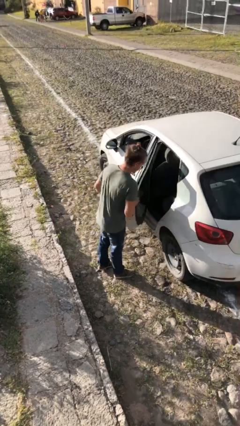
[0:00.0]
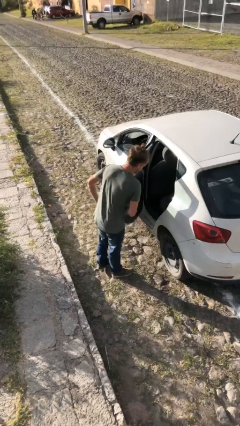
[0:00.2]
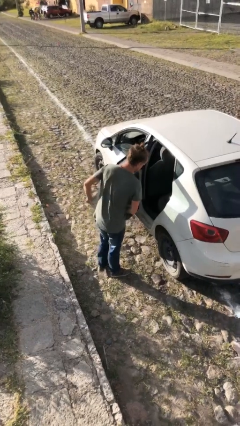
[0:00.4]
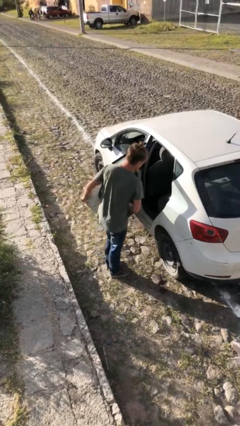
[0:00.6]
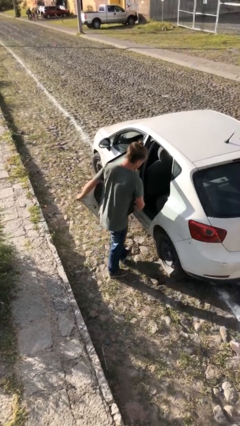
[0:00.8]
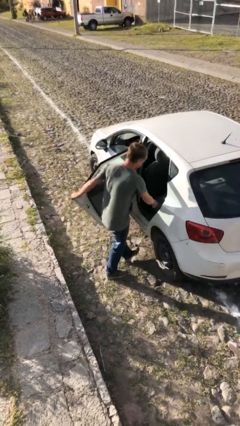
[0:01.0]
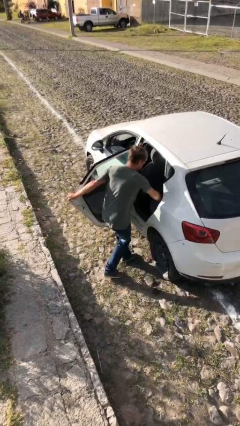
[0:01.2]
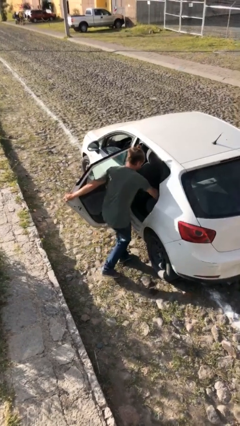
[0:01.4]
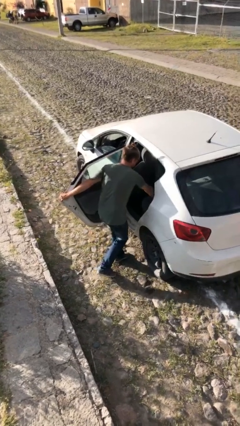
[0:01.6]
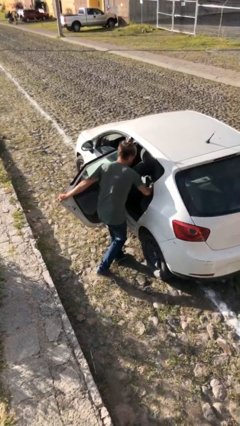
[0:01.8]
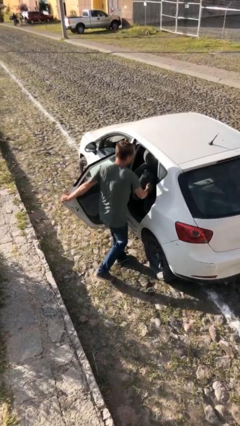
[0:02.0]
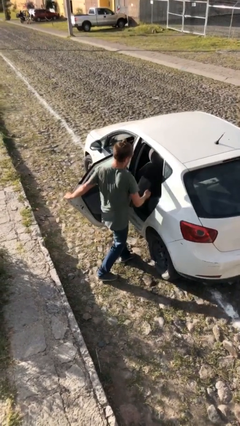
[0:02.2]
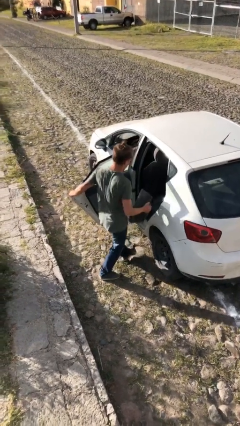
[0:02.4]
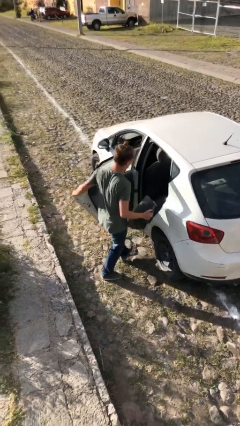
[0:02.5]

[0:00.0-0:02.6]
person unloads car

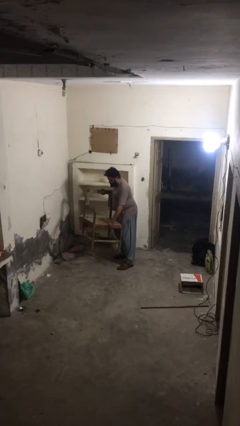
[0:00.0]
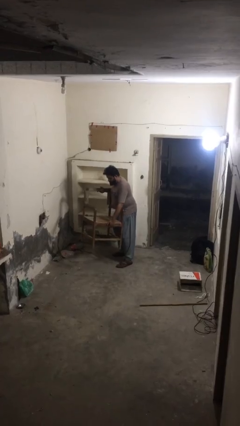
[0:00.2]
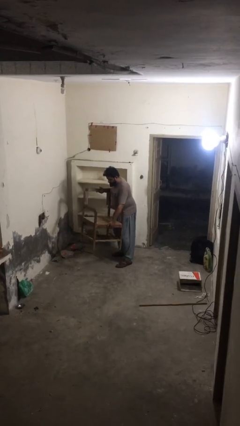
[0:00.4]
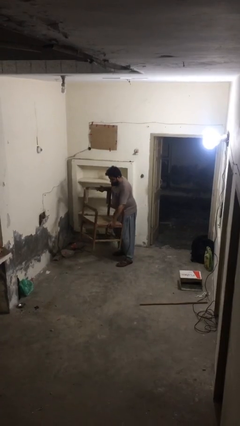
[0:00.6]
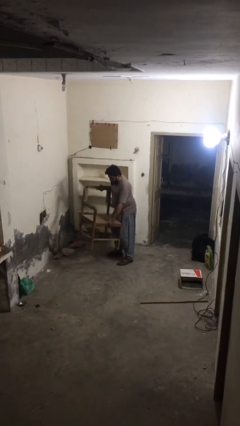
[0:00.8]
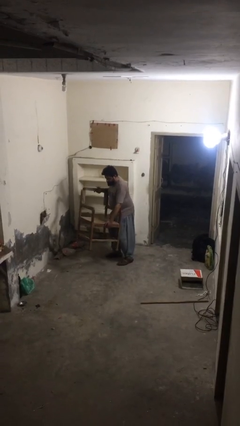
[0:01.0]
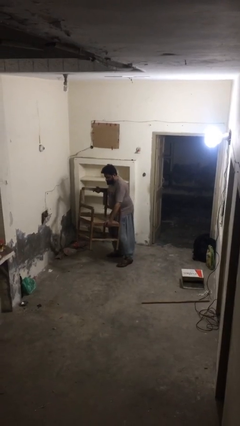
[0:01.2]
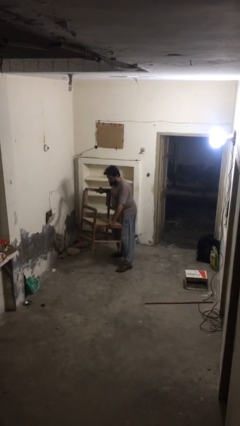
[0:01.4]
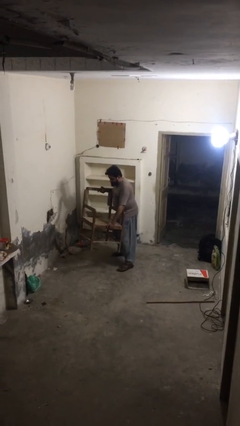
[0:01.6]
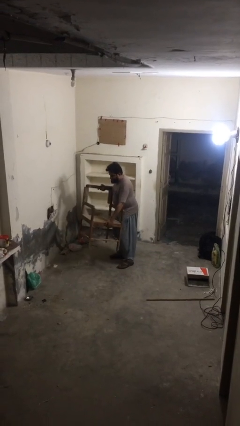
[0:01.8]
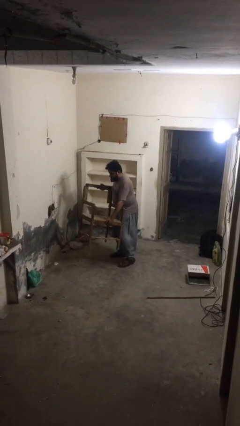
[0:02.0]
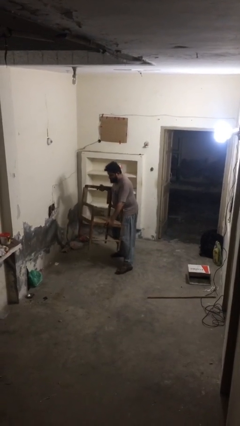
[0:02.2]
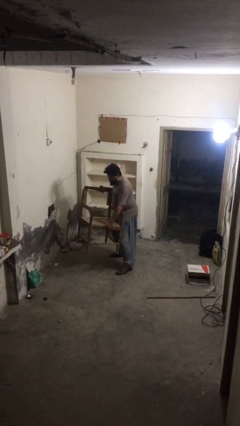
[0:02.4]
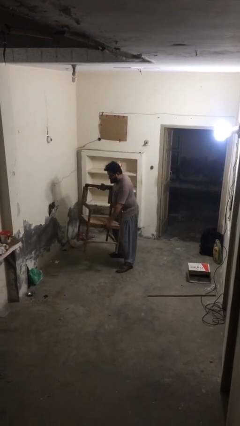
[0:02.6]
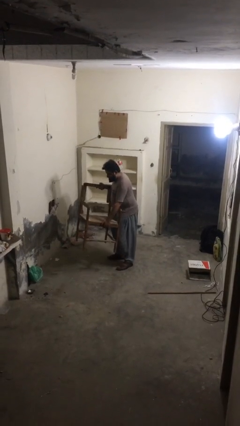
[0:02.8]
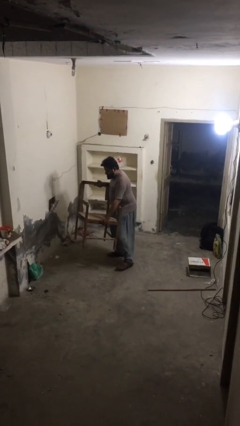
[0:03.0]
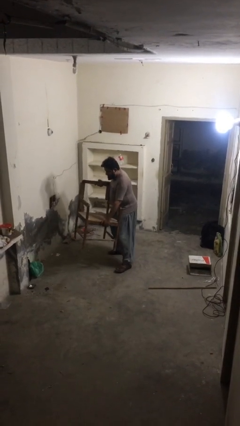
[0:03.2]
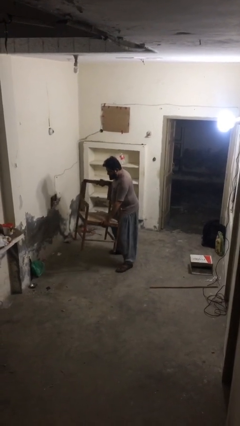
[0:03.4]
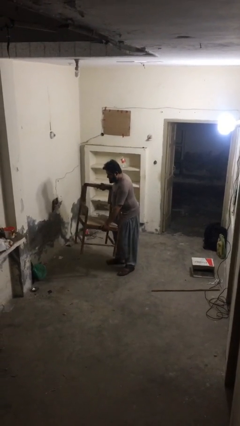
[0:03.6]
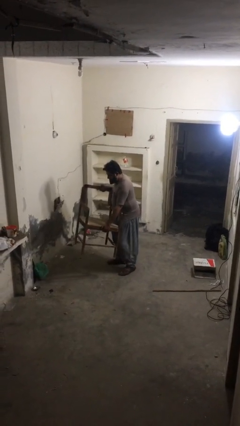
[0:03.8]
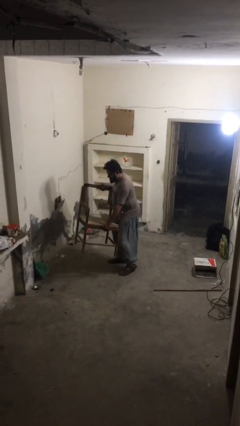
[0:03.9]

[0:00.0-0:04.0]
person carries heavy object

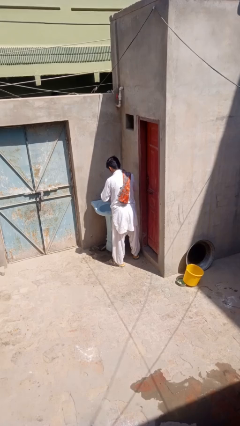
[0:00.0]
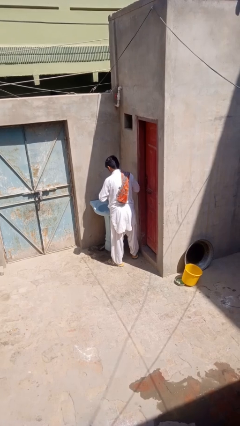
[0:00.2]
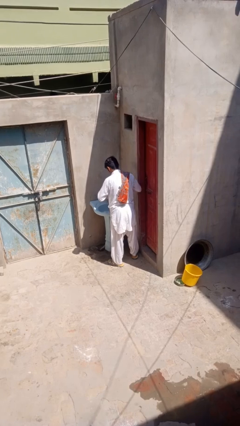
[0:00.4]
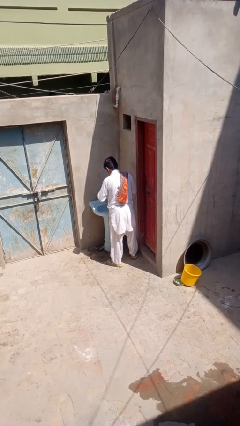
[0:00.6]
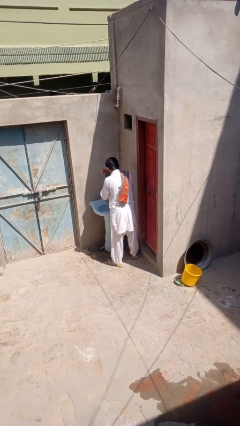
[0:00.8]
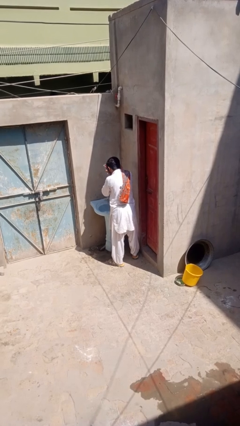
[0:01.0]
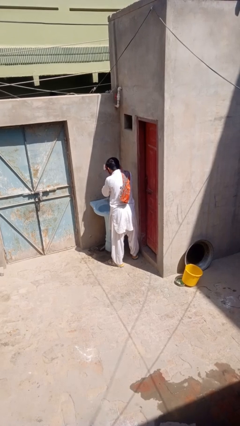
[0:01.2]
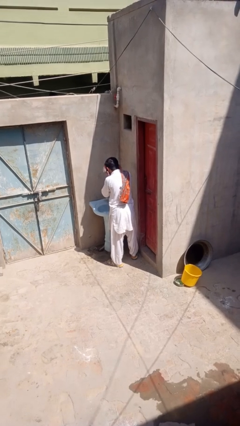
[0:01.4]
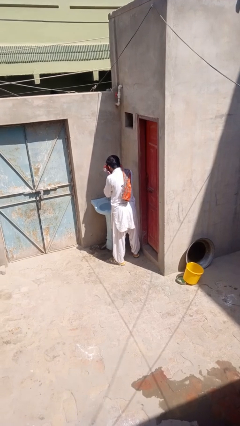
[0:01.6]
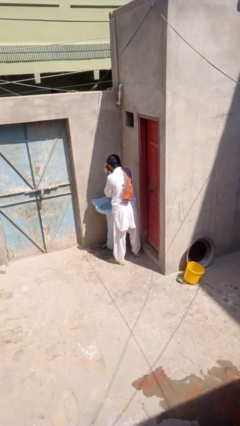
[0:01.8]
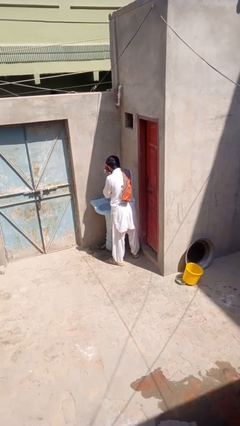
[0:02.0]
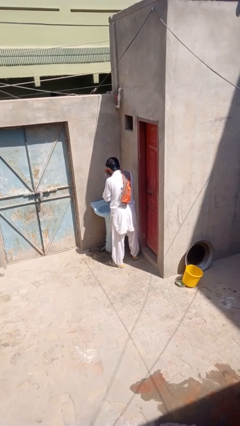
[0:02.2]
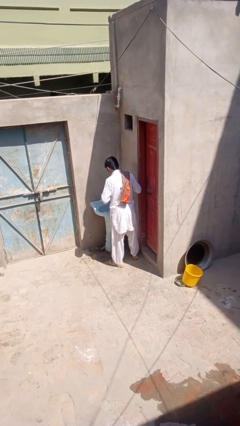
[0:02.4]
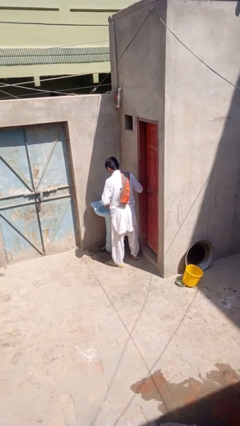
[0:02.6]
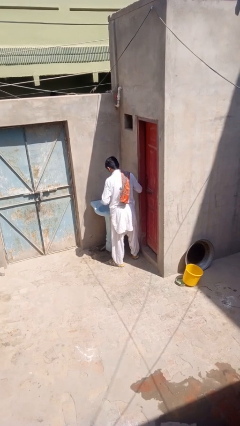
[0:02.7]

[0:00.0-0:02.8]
person dries face with towel

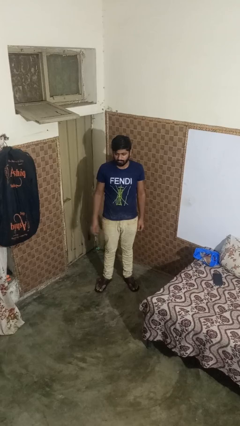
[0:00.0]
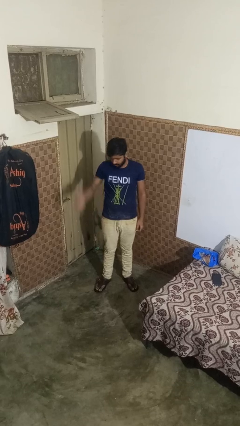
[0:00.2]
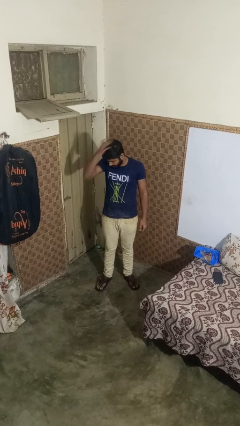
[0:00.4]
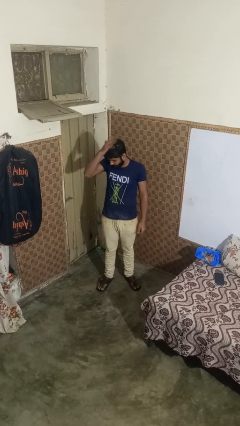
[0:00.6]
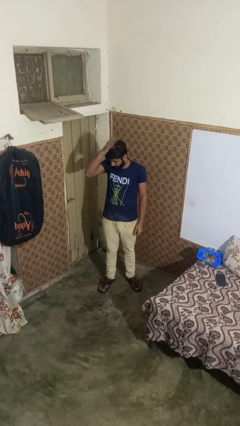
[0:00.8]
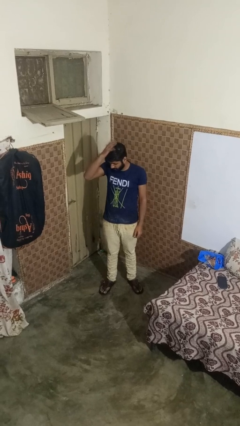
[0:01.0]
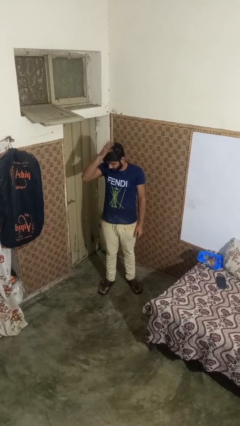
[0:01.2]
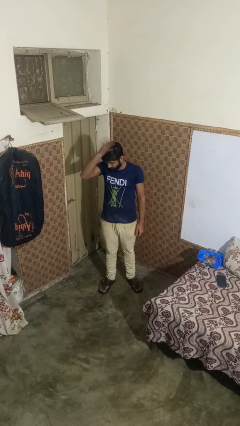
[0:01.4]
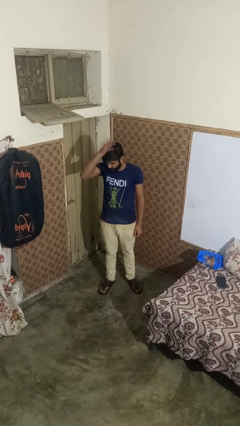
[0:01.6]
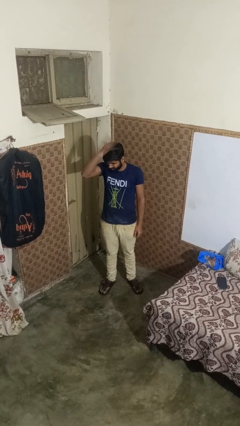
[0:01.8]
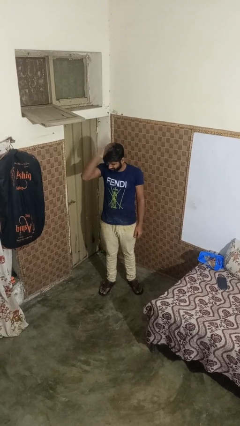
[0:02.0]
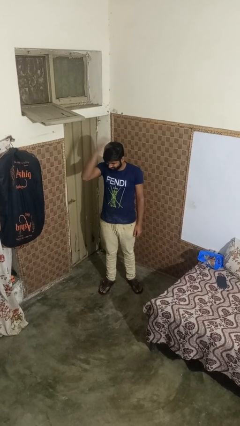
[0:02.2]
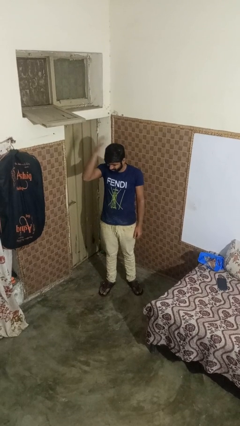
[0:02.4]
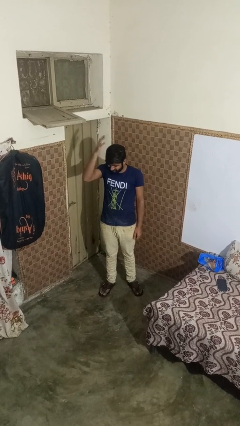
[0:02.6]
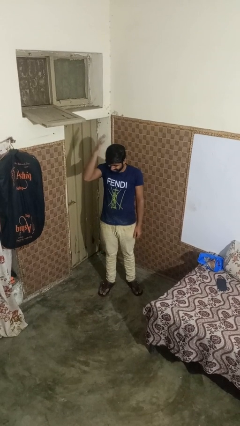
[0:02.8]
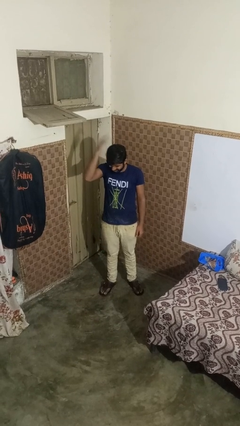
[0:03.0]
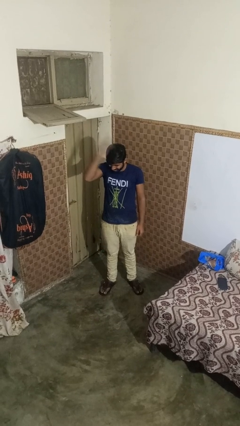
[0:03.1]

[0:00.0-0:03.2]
person pats head

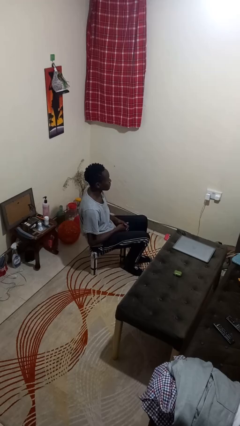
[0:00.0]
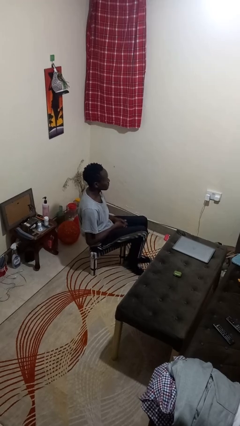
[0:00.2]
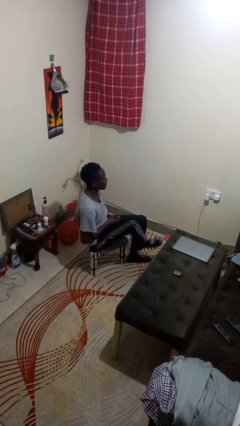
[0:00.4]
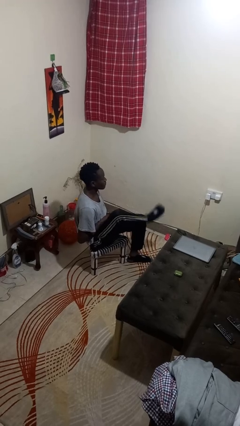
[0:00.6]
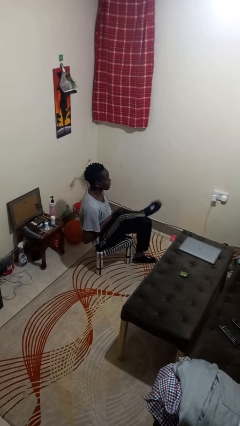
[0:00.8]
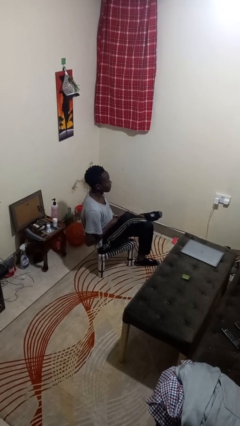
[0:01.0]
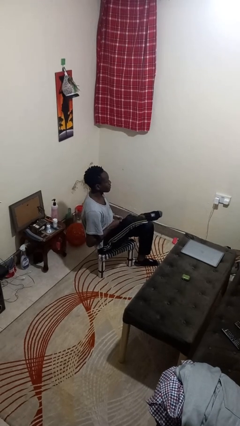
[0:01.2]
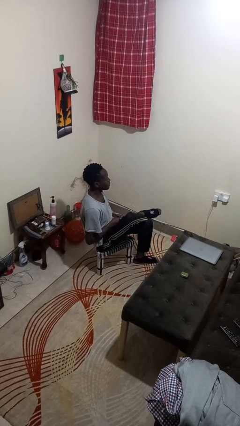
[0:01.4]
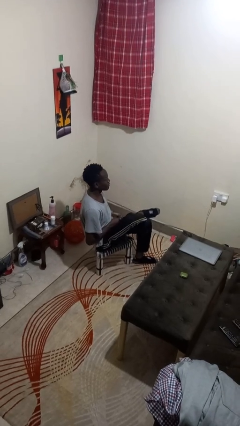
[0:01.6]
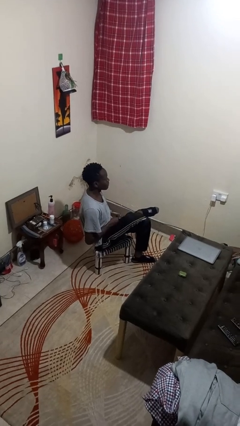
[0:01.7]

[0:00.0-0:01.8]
person crosses legs

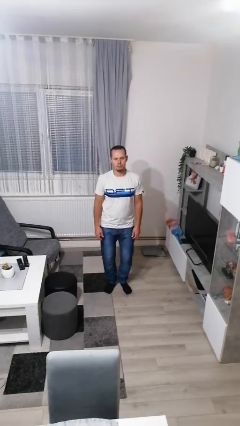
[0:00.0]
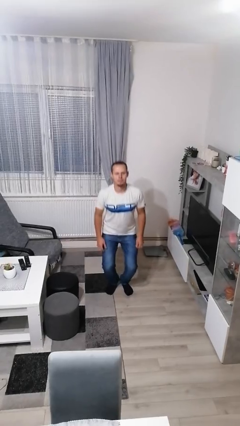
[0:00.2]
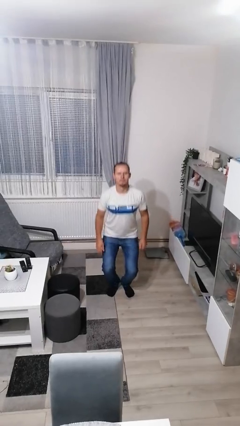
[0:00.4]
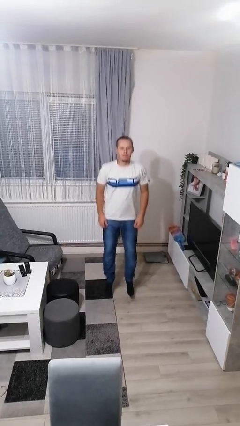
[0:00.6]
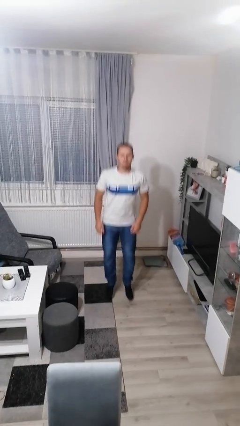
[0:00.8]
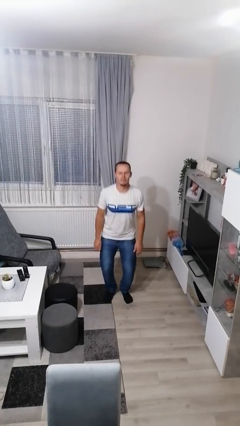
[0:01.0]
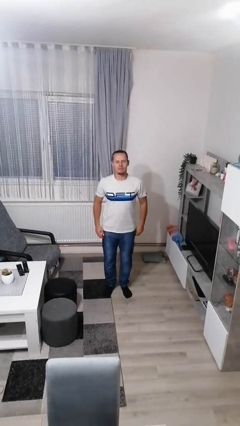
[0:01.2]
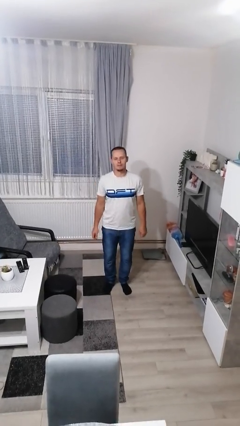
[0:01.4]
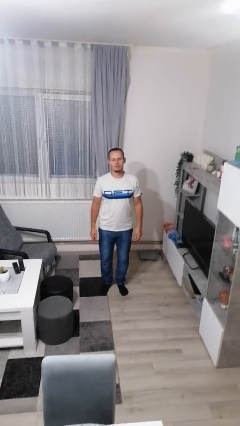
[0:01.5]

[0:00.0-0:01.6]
person jumps

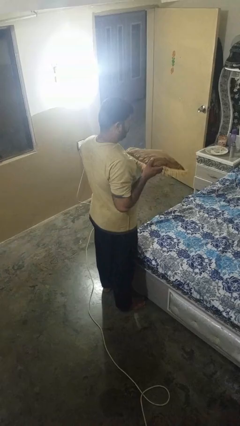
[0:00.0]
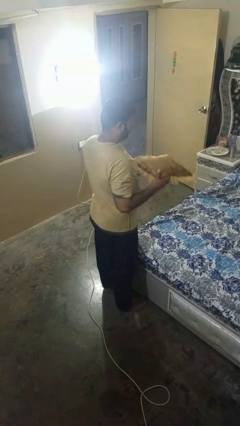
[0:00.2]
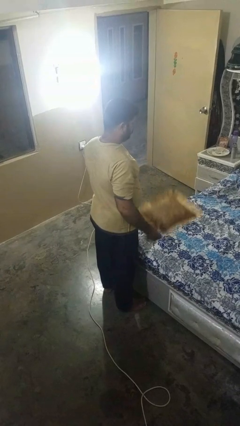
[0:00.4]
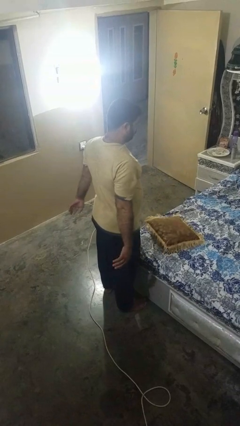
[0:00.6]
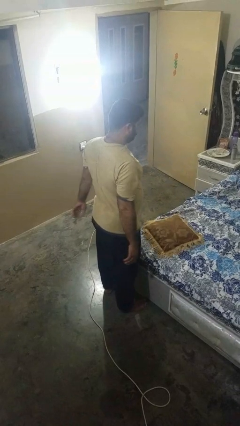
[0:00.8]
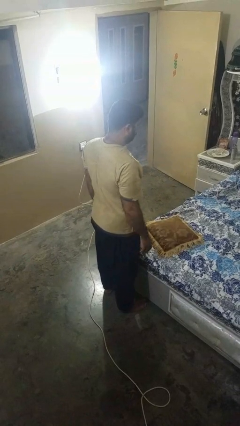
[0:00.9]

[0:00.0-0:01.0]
person puts down object on bed

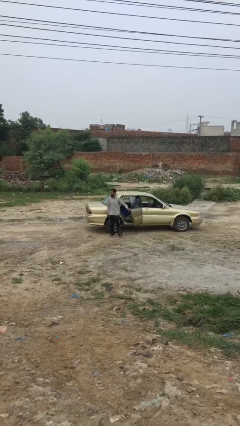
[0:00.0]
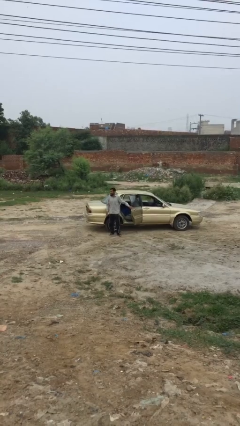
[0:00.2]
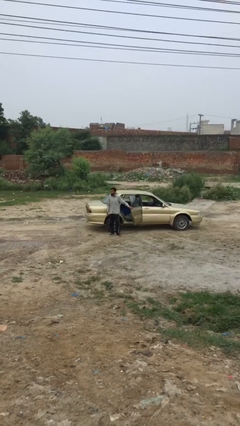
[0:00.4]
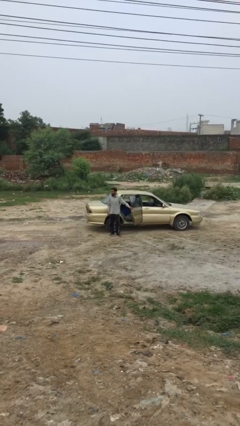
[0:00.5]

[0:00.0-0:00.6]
person closes car door
